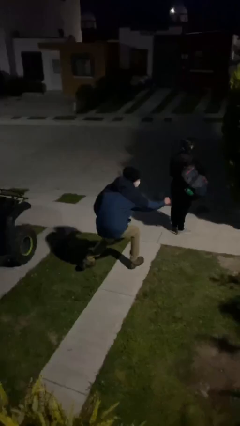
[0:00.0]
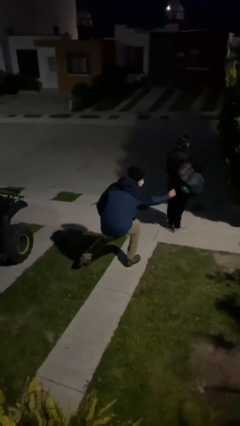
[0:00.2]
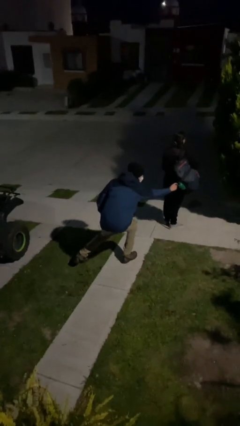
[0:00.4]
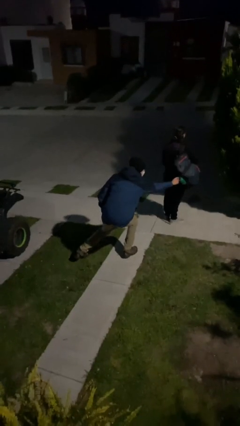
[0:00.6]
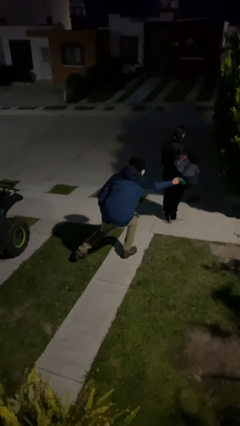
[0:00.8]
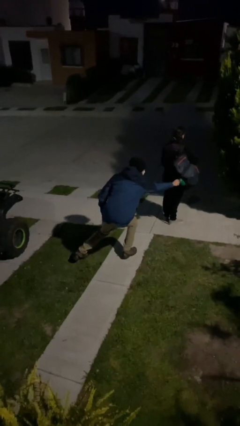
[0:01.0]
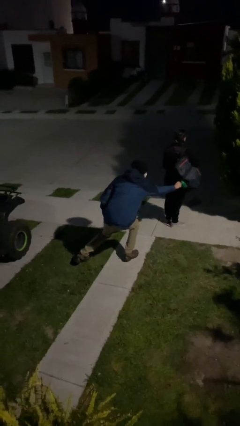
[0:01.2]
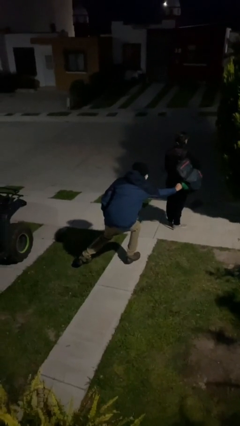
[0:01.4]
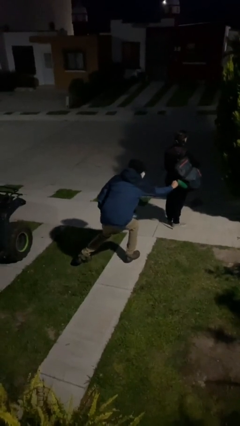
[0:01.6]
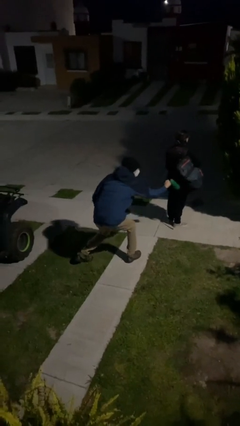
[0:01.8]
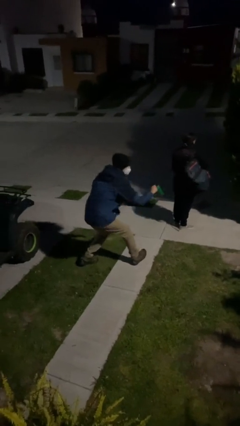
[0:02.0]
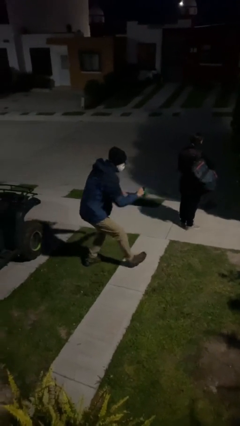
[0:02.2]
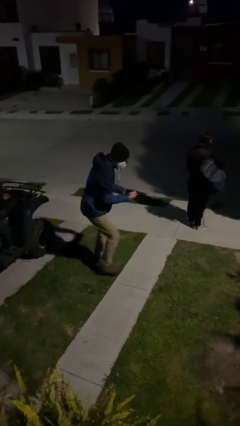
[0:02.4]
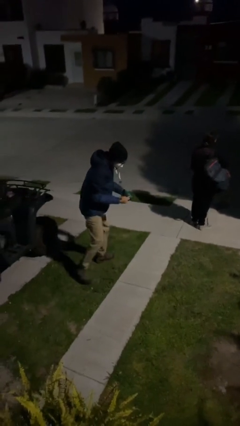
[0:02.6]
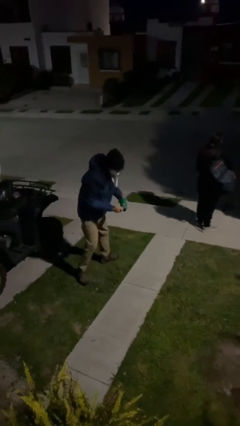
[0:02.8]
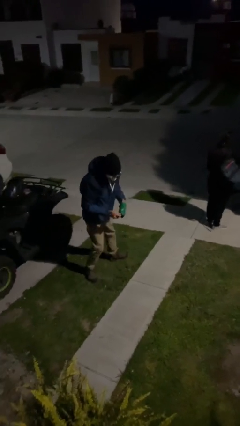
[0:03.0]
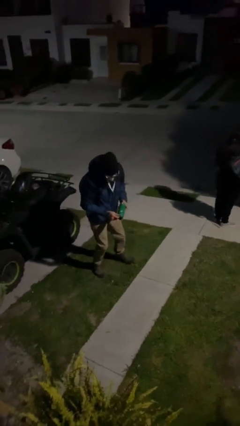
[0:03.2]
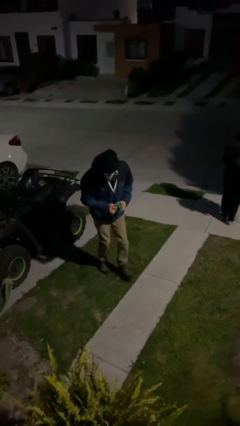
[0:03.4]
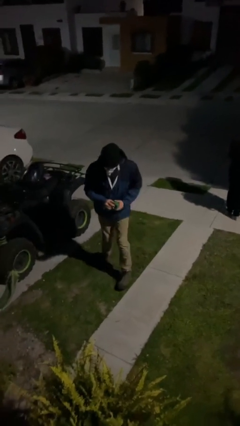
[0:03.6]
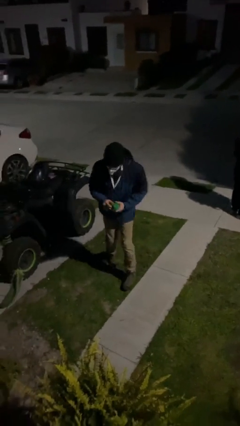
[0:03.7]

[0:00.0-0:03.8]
person steals object from person

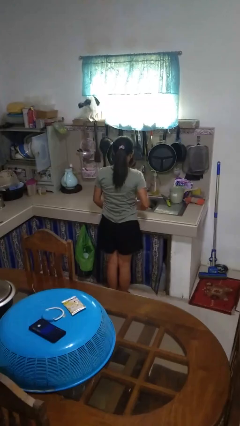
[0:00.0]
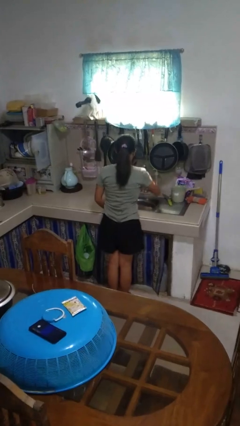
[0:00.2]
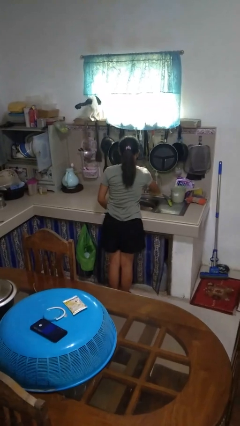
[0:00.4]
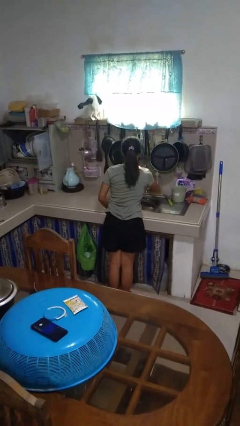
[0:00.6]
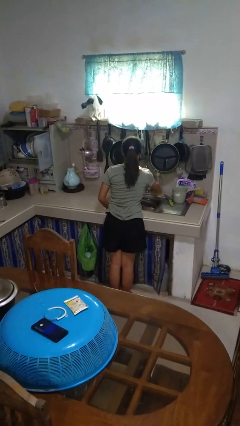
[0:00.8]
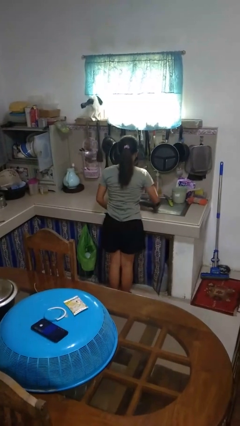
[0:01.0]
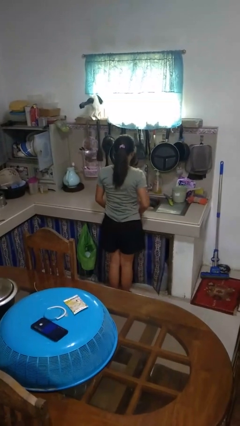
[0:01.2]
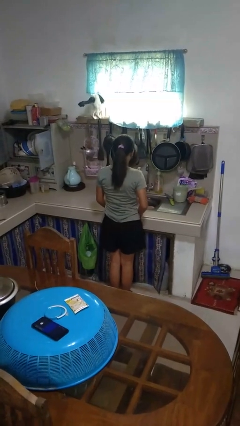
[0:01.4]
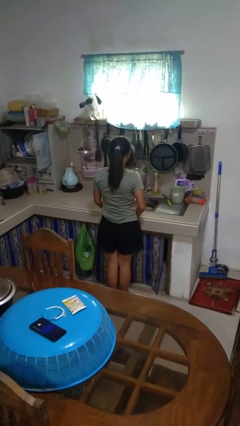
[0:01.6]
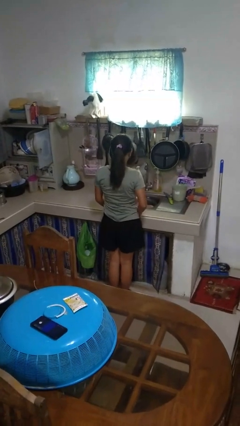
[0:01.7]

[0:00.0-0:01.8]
person turns off faucet

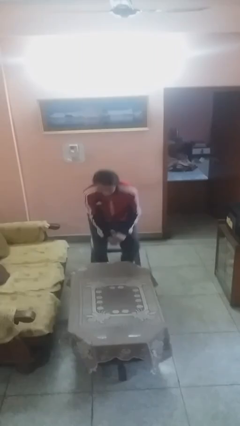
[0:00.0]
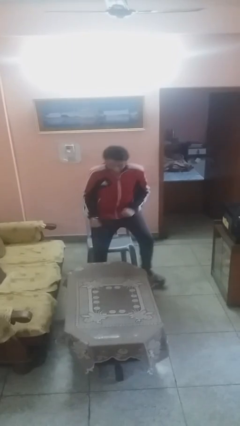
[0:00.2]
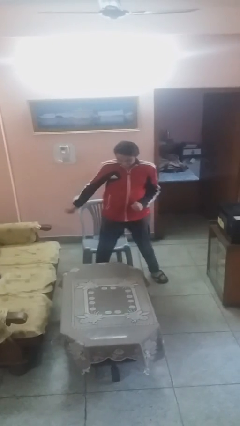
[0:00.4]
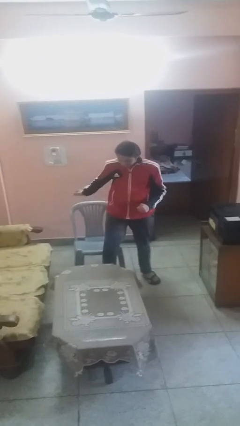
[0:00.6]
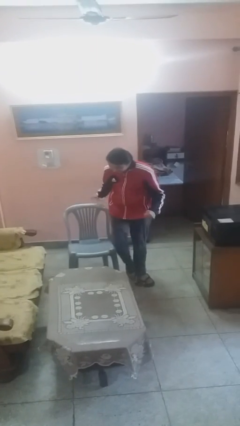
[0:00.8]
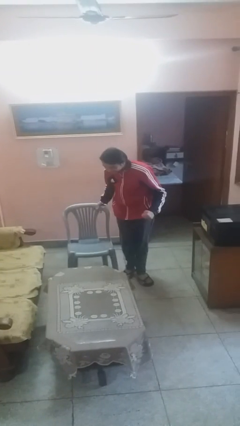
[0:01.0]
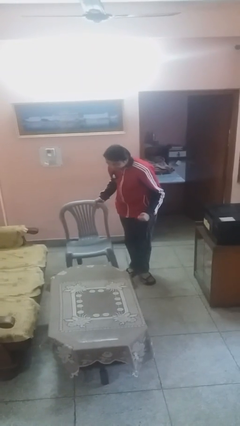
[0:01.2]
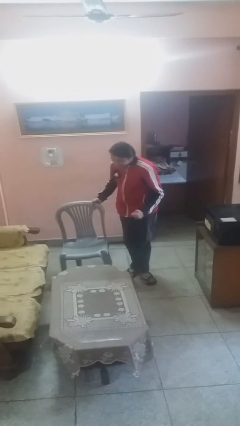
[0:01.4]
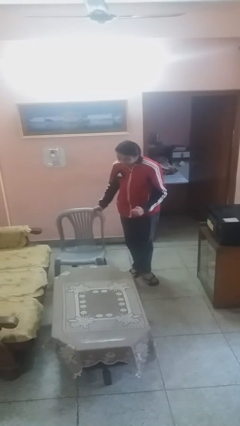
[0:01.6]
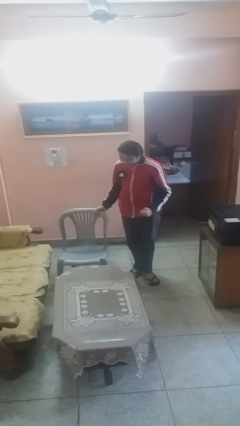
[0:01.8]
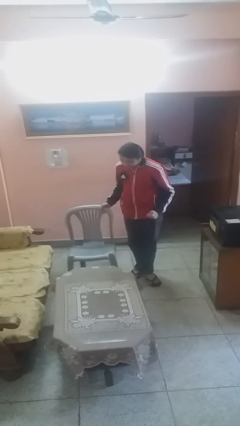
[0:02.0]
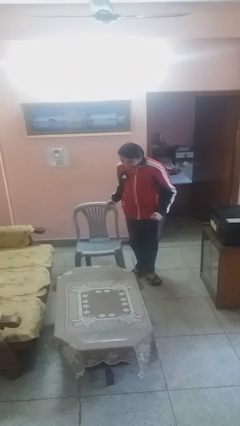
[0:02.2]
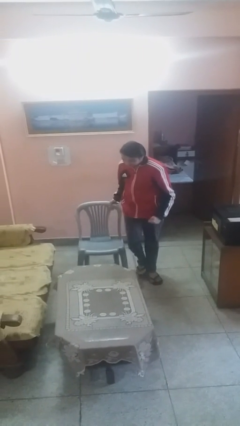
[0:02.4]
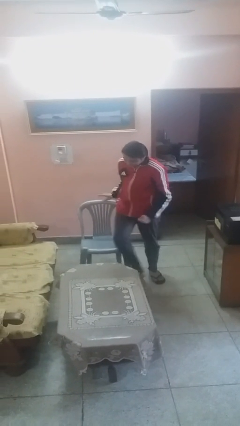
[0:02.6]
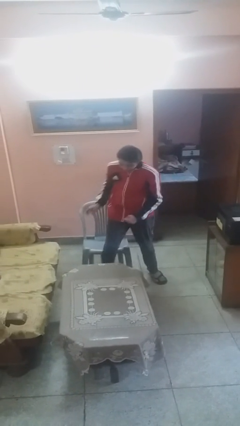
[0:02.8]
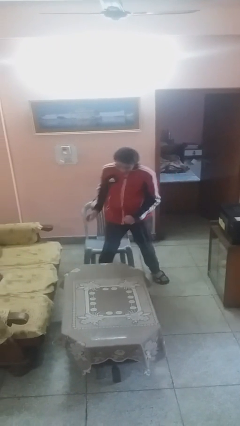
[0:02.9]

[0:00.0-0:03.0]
person stands up

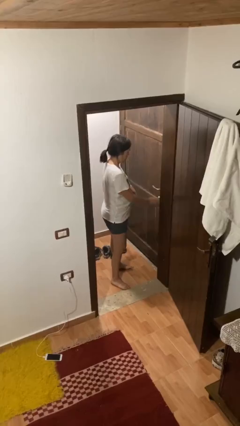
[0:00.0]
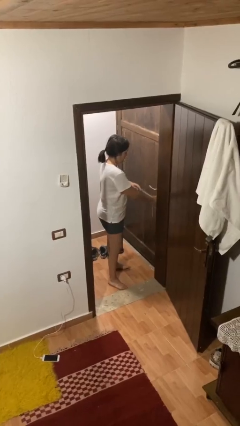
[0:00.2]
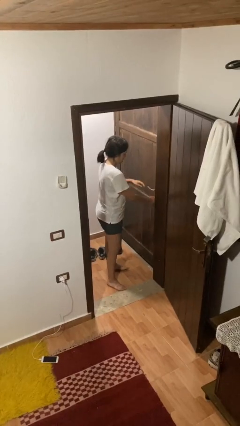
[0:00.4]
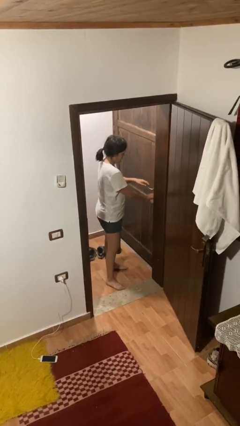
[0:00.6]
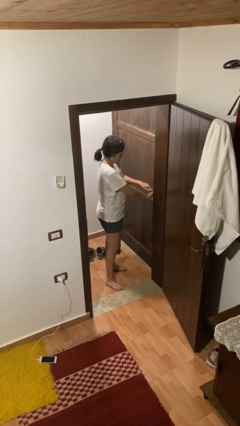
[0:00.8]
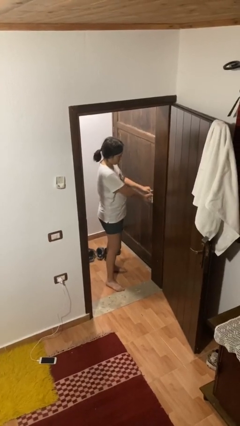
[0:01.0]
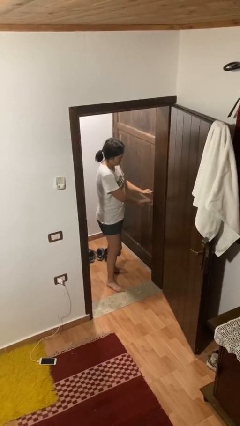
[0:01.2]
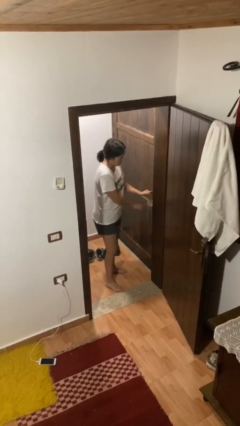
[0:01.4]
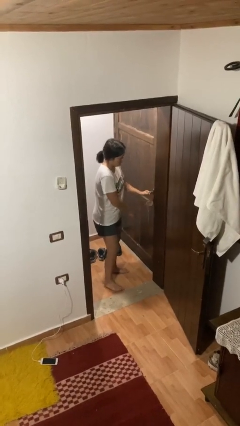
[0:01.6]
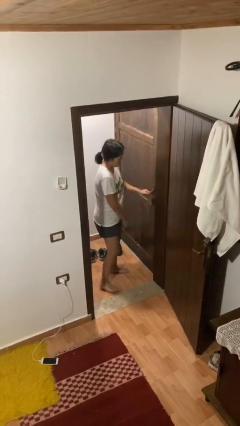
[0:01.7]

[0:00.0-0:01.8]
person unlocks door with keys

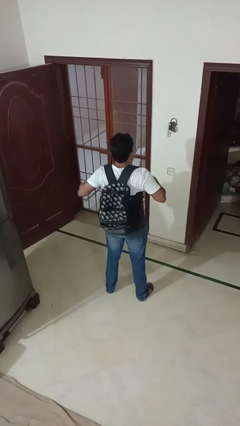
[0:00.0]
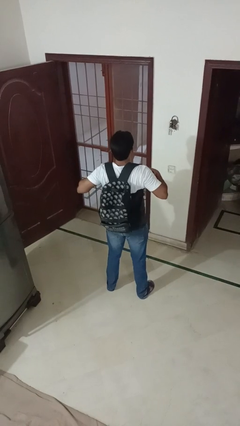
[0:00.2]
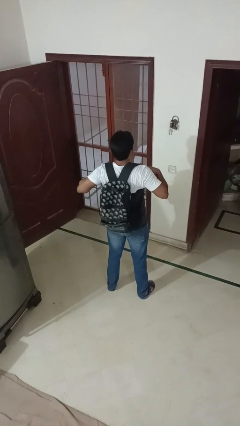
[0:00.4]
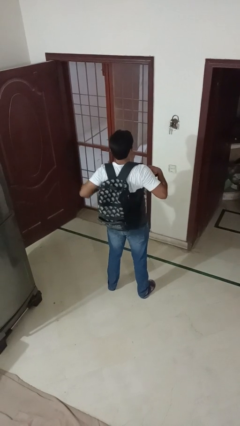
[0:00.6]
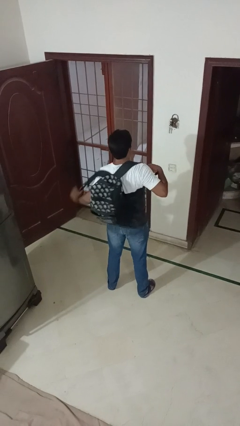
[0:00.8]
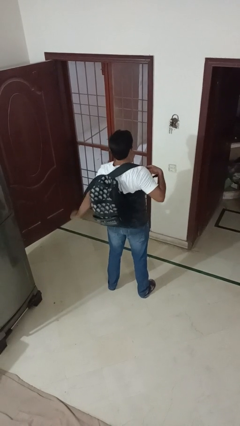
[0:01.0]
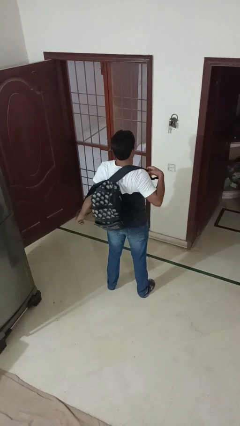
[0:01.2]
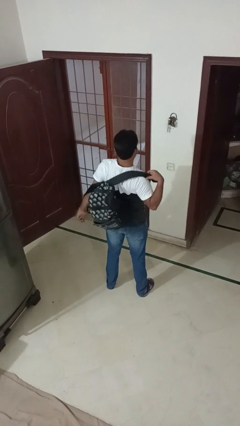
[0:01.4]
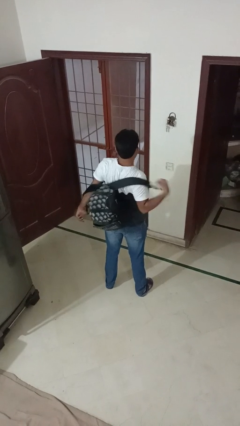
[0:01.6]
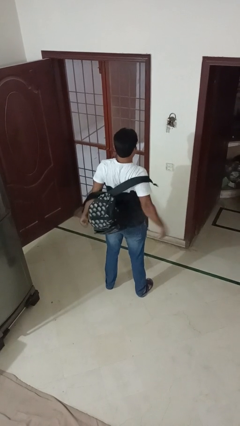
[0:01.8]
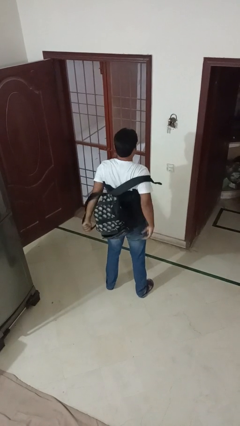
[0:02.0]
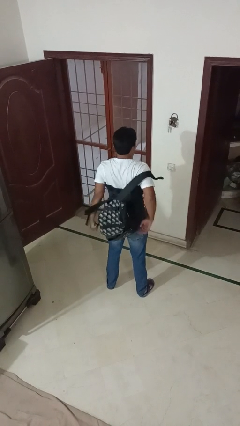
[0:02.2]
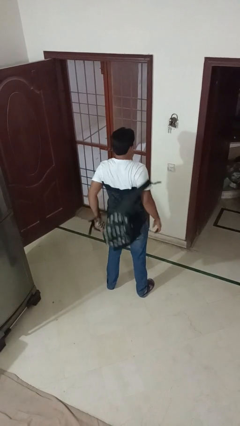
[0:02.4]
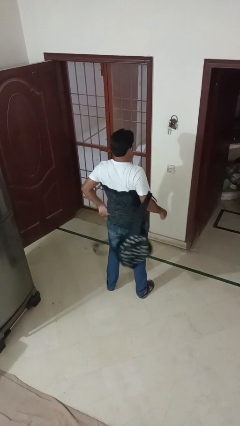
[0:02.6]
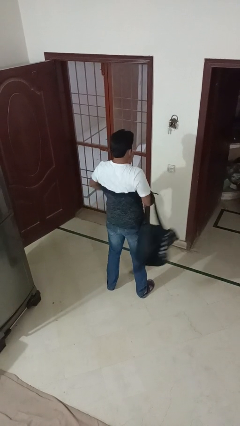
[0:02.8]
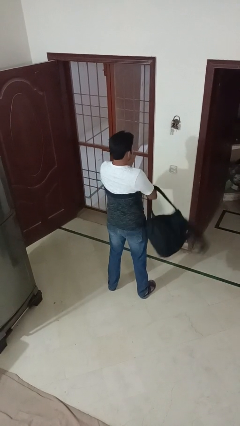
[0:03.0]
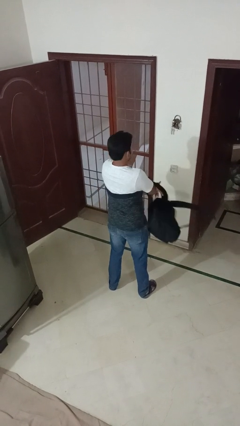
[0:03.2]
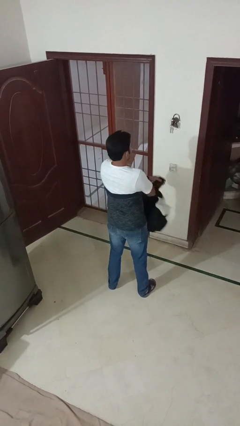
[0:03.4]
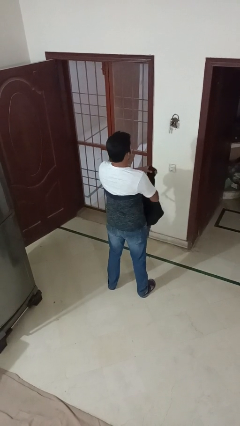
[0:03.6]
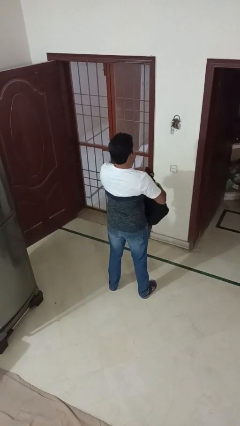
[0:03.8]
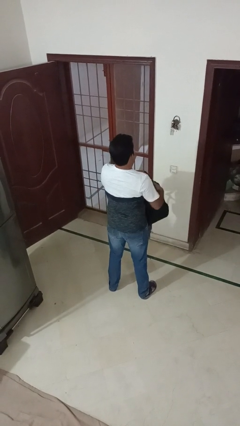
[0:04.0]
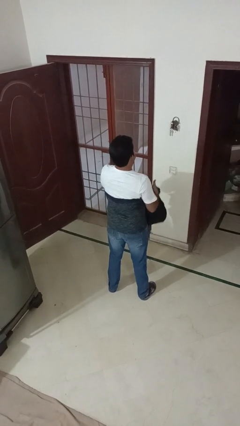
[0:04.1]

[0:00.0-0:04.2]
person takes off backpack

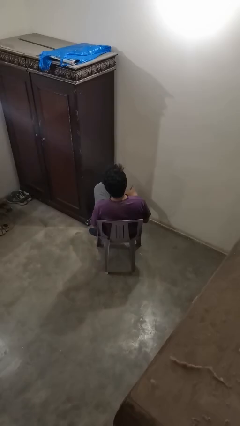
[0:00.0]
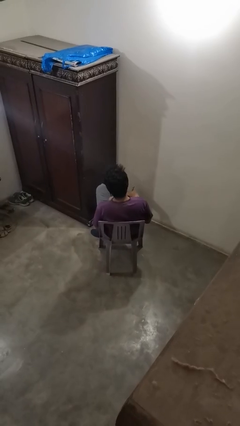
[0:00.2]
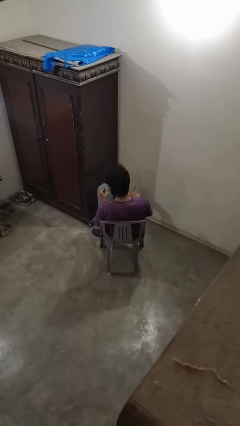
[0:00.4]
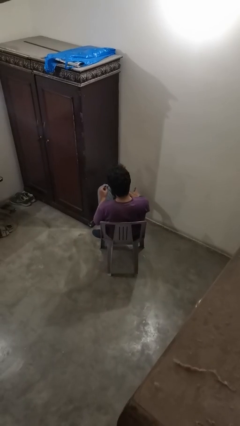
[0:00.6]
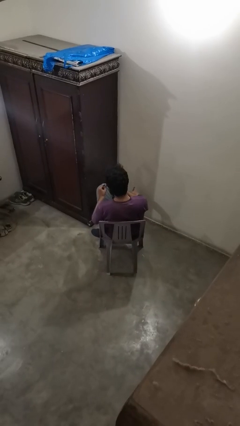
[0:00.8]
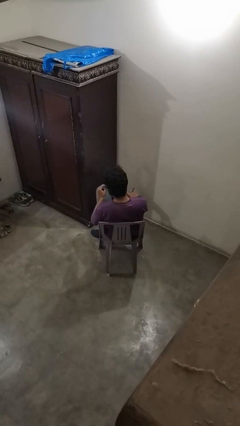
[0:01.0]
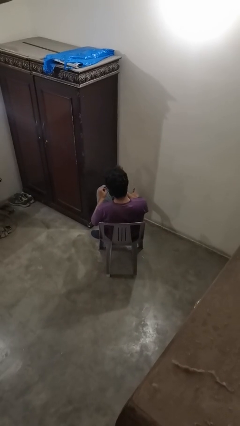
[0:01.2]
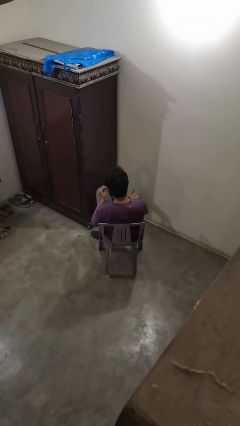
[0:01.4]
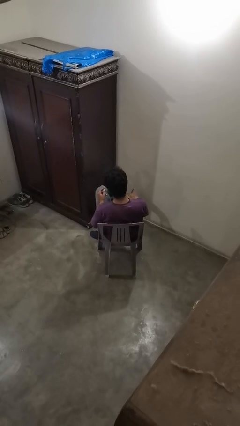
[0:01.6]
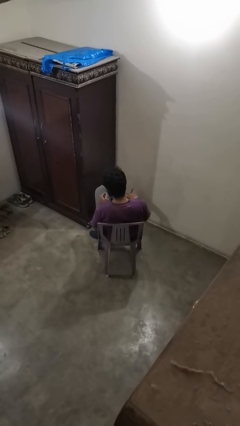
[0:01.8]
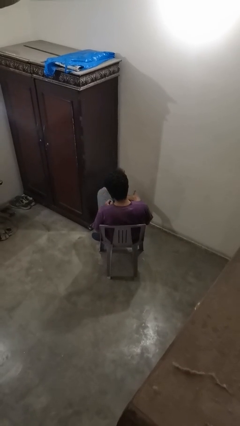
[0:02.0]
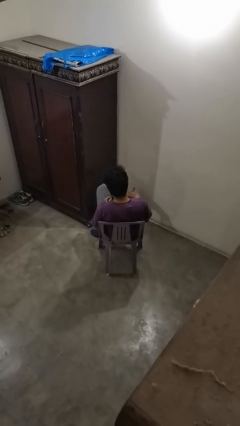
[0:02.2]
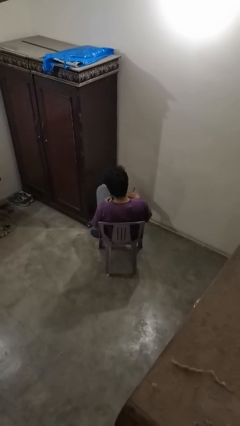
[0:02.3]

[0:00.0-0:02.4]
person clips fingernails

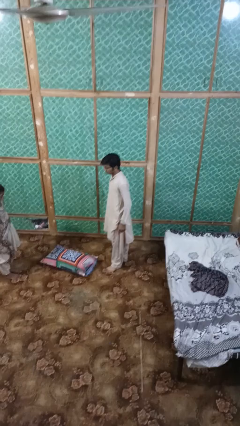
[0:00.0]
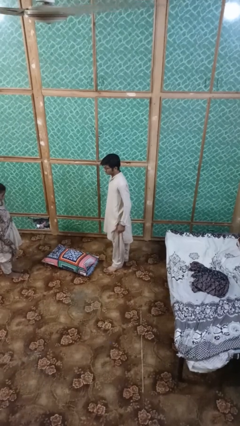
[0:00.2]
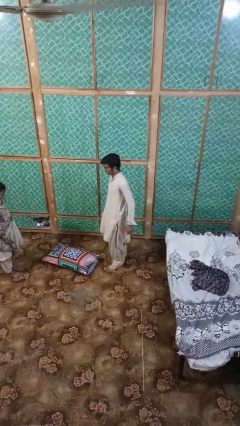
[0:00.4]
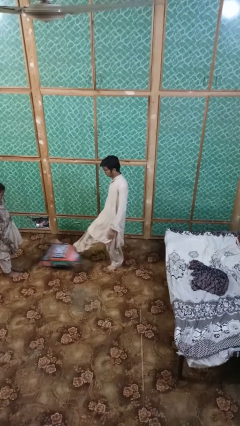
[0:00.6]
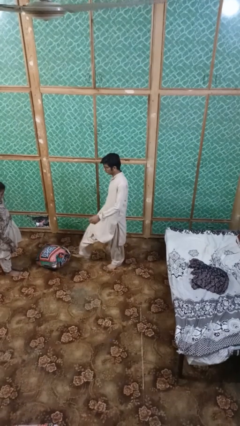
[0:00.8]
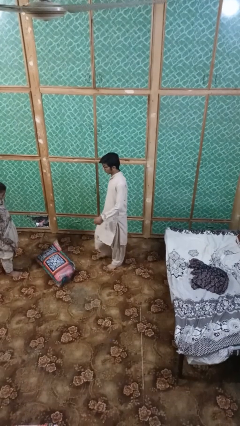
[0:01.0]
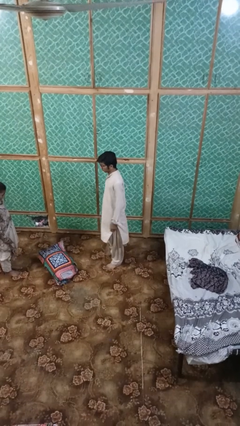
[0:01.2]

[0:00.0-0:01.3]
person kicks object to person
